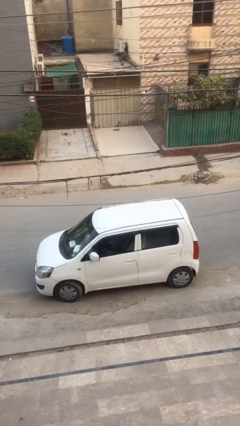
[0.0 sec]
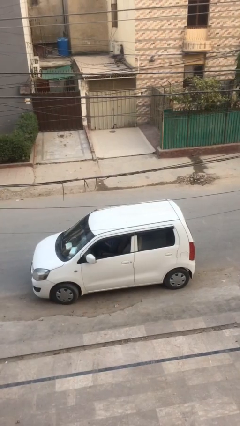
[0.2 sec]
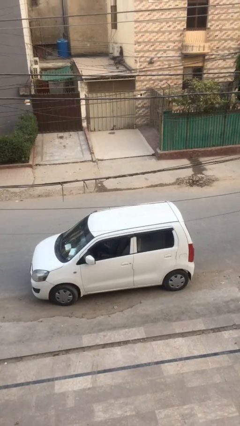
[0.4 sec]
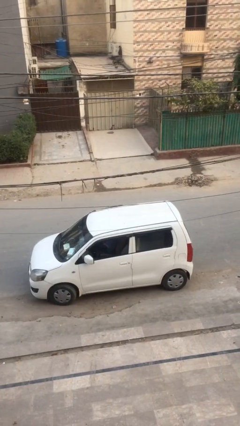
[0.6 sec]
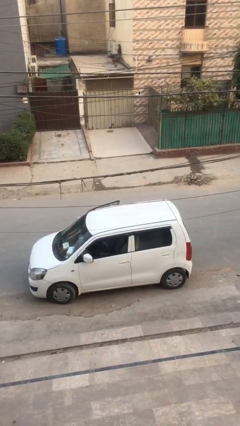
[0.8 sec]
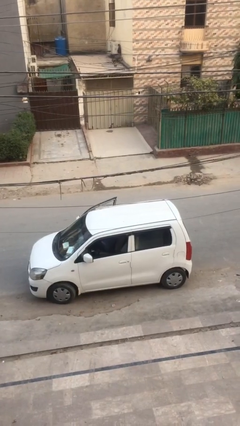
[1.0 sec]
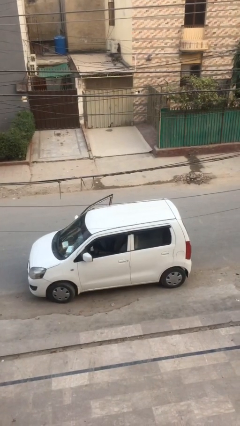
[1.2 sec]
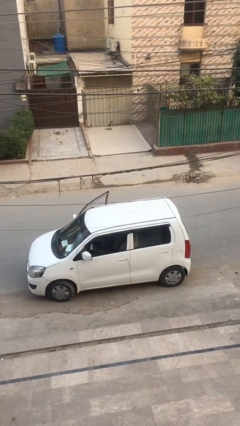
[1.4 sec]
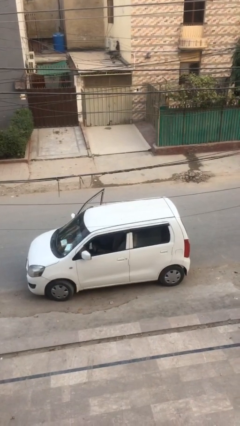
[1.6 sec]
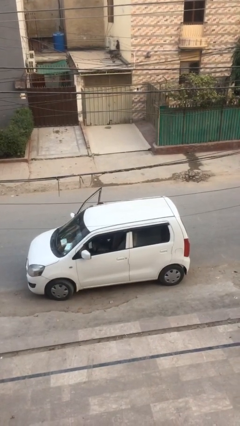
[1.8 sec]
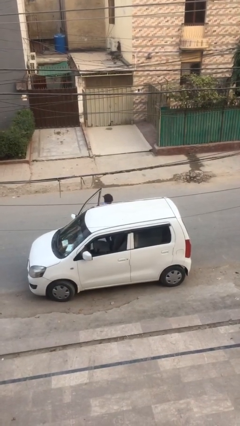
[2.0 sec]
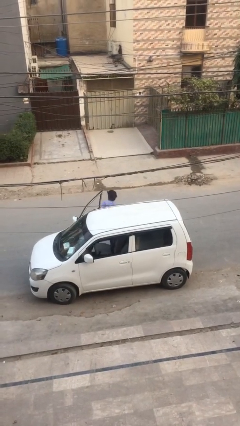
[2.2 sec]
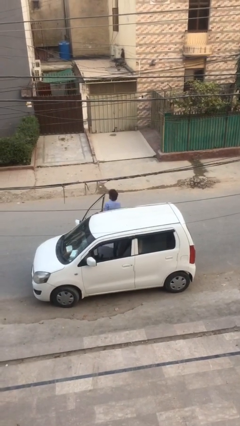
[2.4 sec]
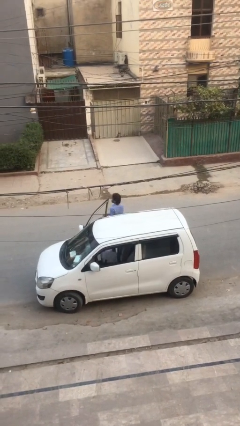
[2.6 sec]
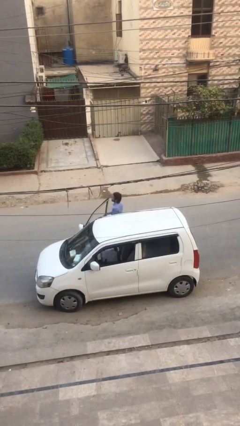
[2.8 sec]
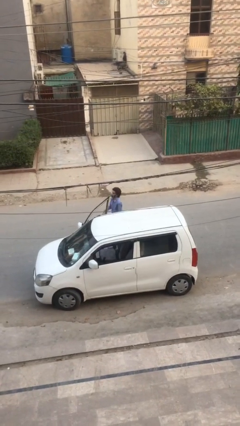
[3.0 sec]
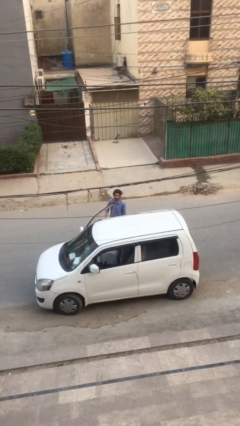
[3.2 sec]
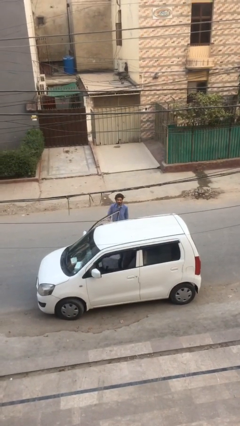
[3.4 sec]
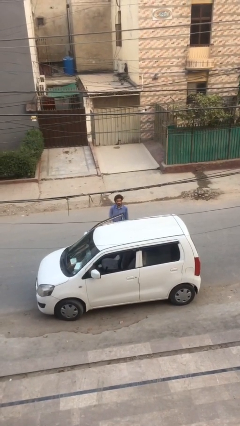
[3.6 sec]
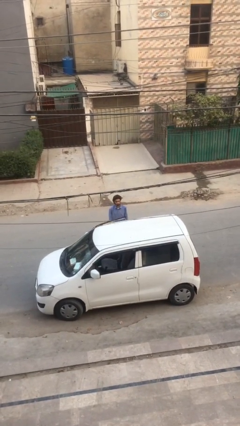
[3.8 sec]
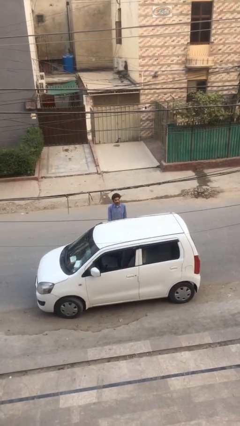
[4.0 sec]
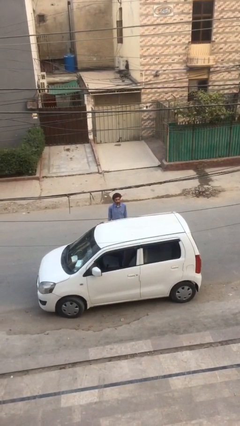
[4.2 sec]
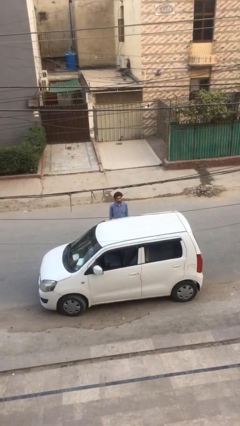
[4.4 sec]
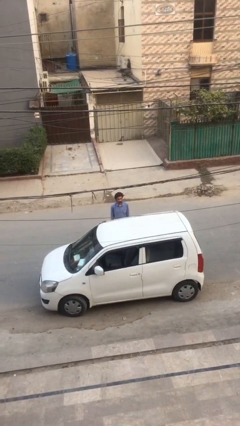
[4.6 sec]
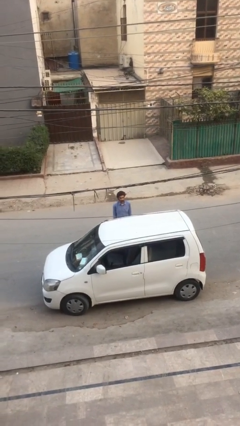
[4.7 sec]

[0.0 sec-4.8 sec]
person exits car

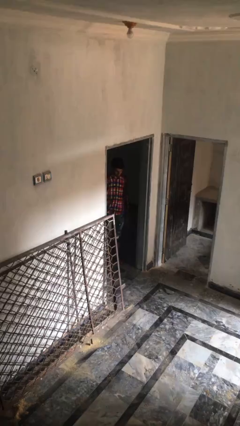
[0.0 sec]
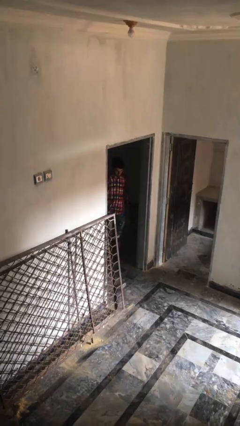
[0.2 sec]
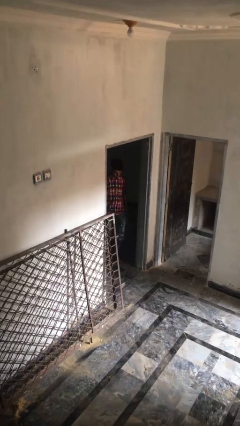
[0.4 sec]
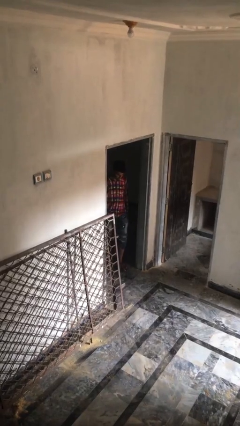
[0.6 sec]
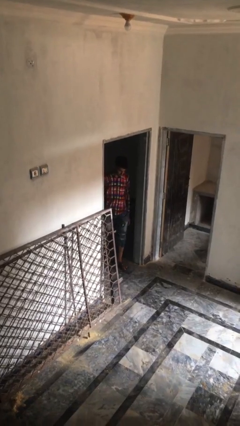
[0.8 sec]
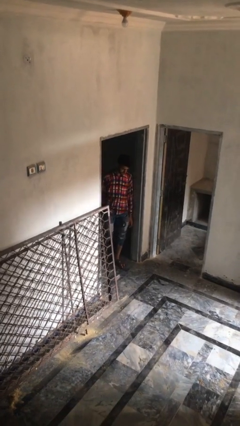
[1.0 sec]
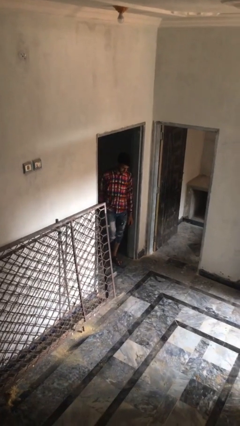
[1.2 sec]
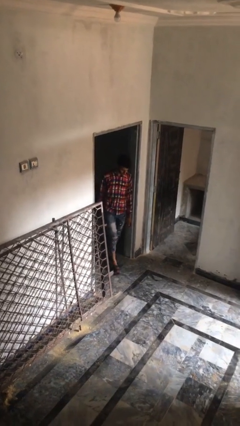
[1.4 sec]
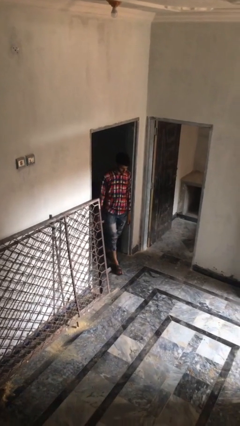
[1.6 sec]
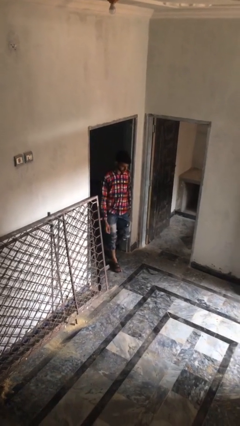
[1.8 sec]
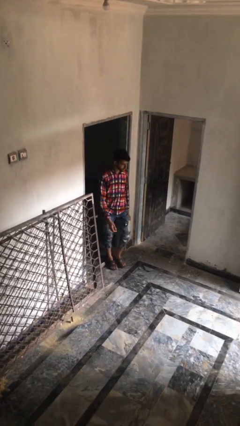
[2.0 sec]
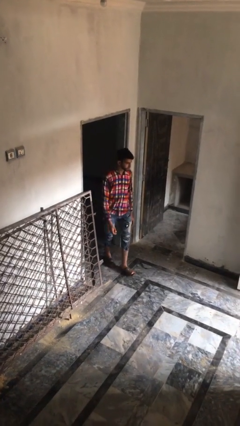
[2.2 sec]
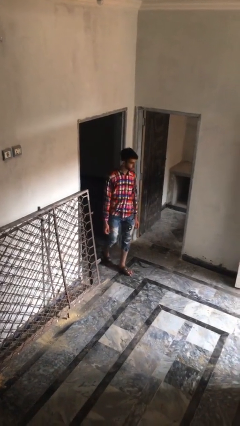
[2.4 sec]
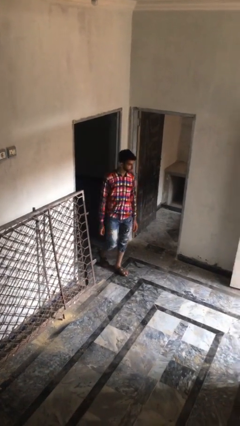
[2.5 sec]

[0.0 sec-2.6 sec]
person enters scene through structure

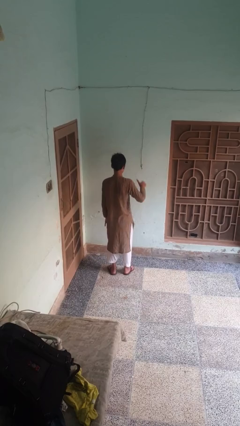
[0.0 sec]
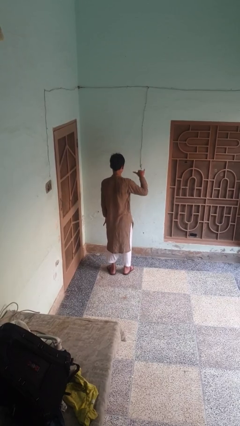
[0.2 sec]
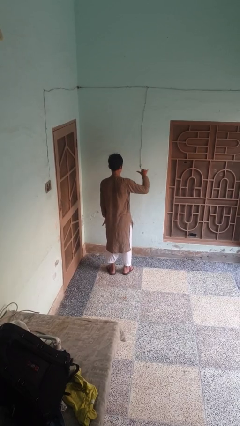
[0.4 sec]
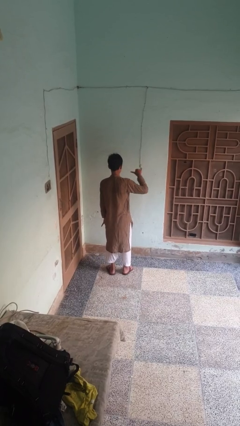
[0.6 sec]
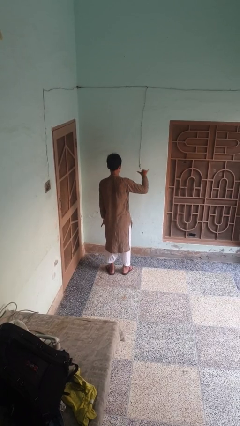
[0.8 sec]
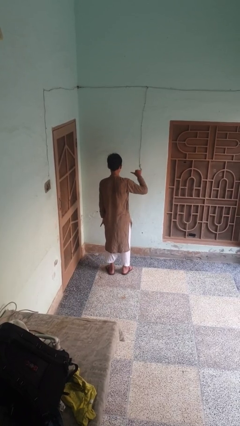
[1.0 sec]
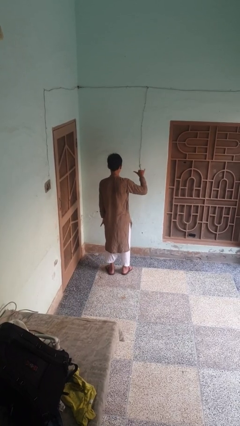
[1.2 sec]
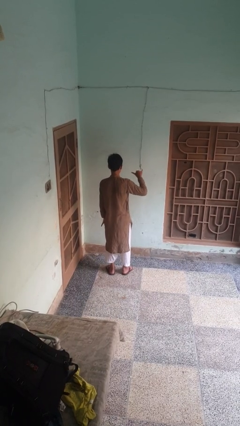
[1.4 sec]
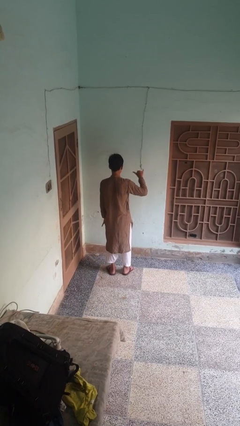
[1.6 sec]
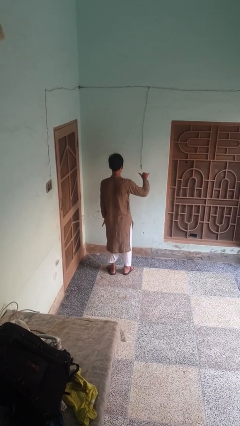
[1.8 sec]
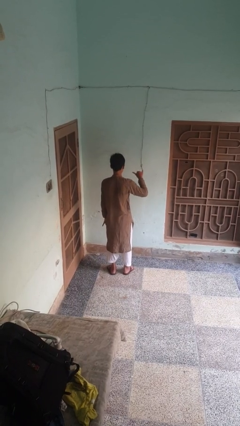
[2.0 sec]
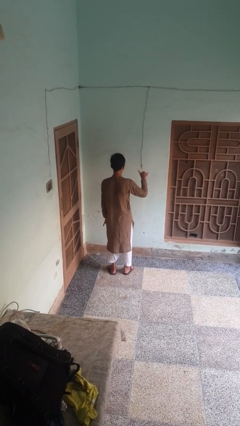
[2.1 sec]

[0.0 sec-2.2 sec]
person gestures hang loose

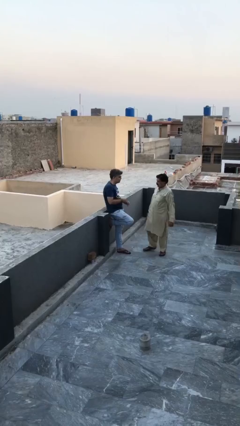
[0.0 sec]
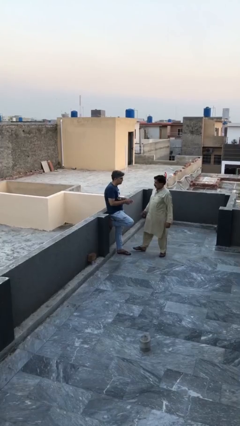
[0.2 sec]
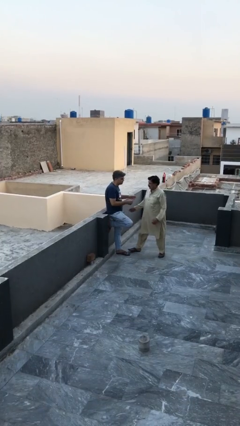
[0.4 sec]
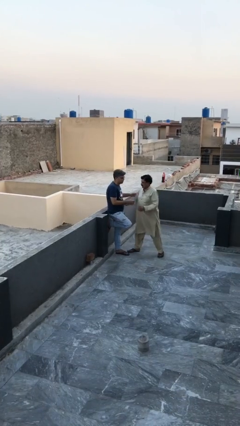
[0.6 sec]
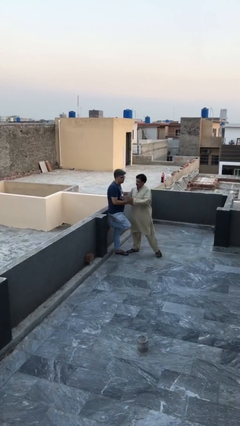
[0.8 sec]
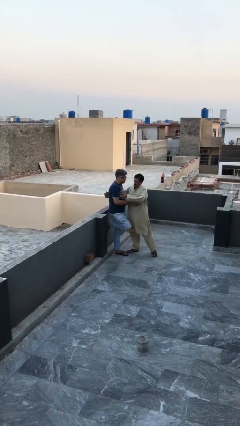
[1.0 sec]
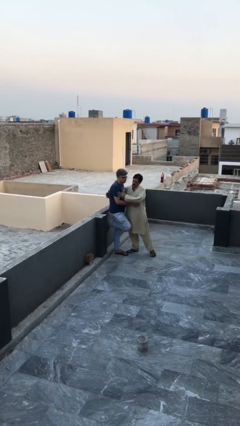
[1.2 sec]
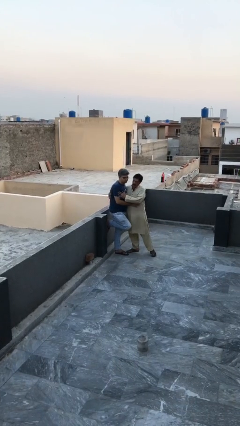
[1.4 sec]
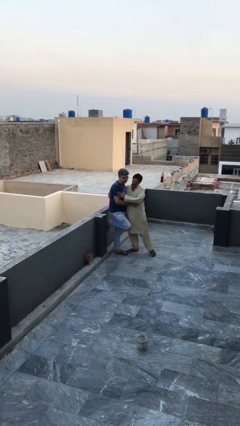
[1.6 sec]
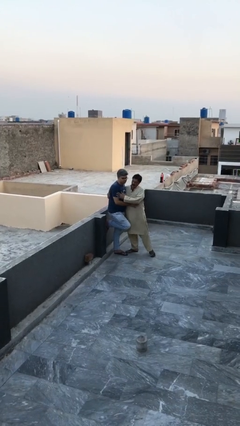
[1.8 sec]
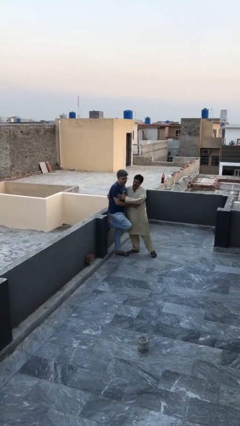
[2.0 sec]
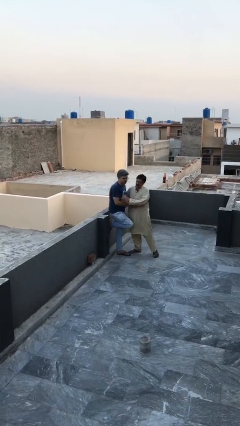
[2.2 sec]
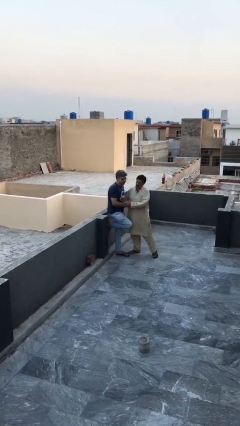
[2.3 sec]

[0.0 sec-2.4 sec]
person embraces person

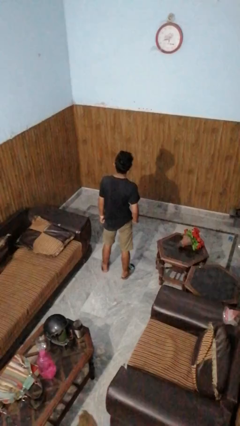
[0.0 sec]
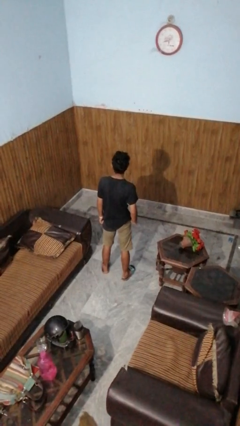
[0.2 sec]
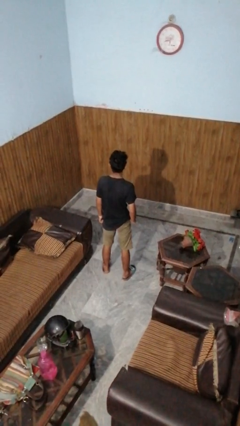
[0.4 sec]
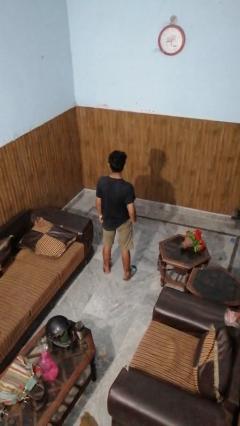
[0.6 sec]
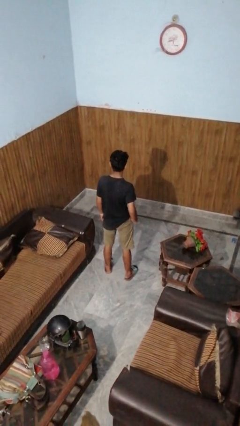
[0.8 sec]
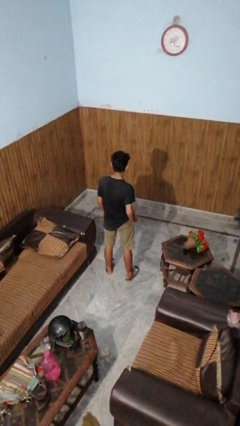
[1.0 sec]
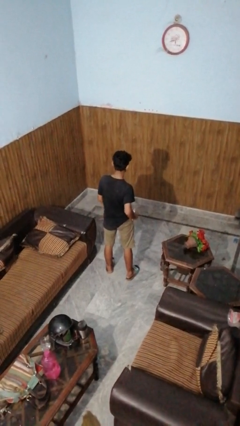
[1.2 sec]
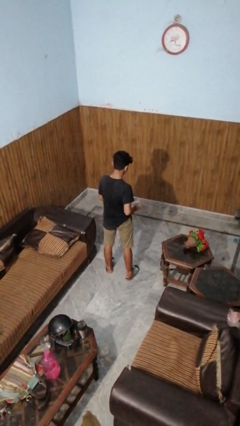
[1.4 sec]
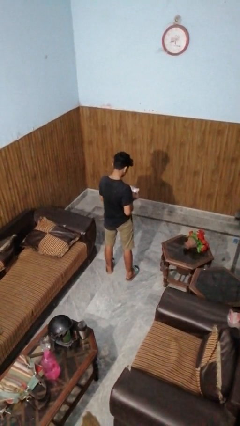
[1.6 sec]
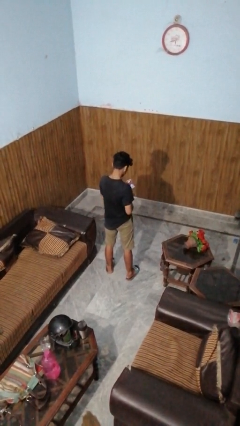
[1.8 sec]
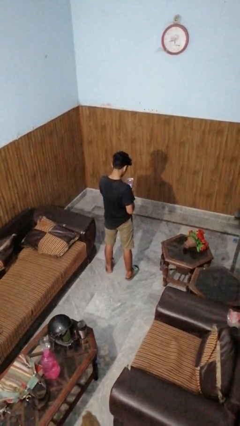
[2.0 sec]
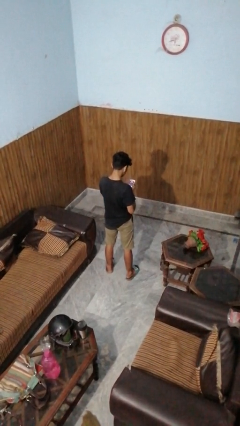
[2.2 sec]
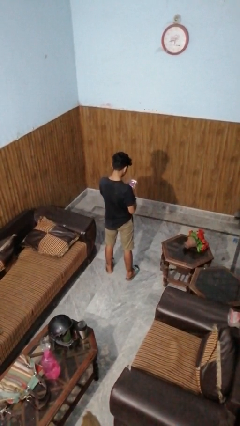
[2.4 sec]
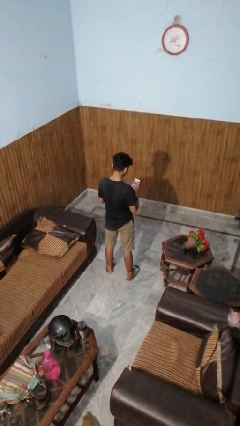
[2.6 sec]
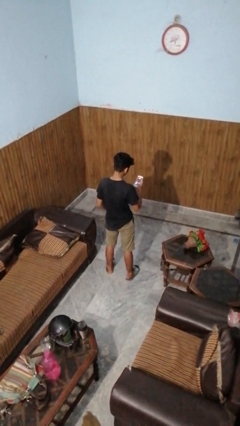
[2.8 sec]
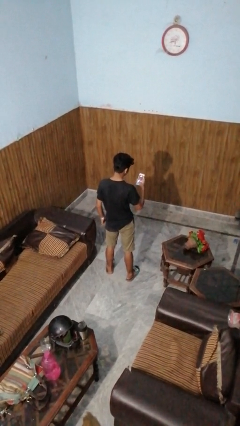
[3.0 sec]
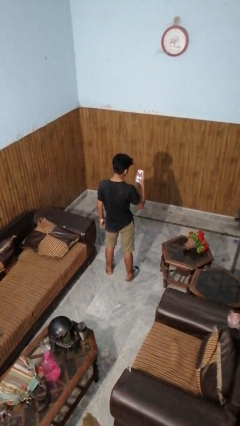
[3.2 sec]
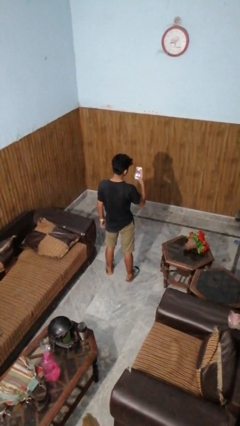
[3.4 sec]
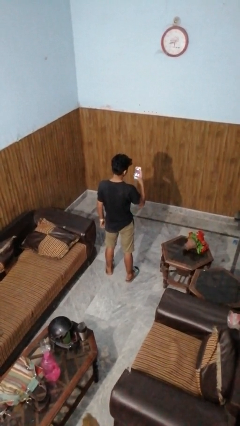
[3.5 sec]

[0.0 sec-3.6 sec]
person takes phone from pocket

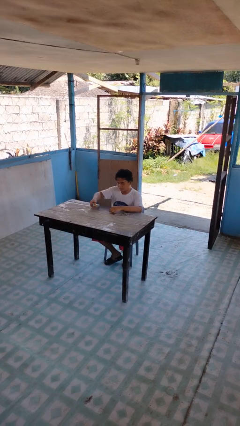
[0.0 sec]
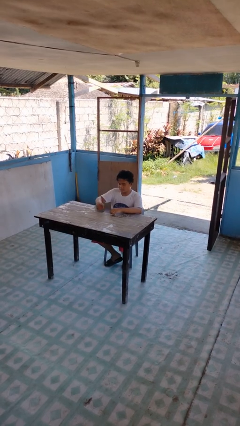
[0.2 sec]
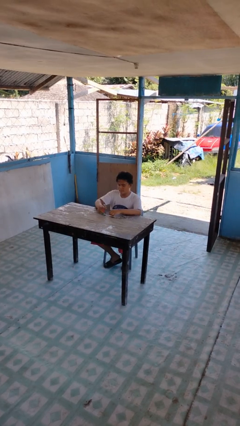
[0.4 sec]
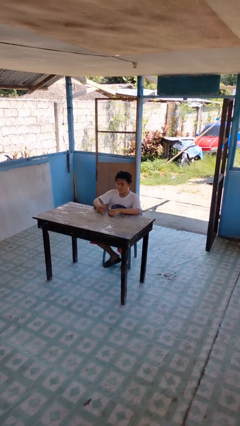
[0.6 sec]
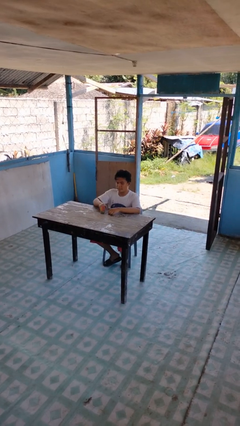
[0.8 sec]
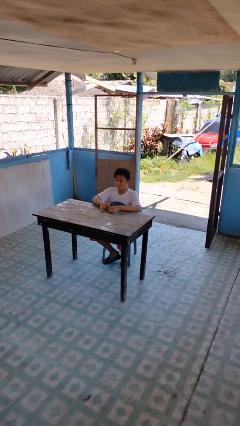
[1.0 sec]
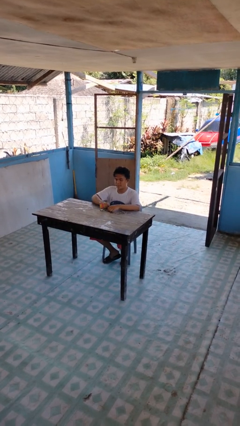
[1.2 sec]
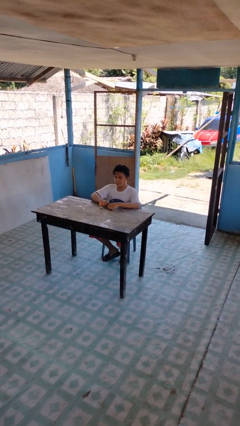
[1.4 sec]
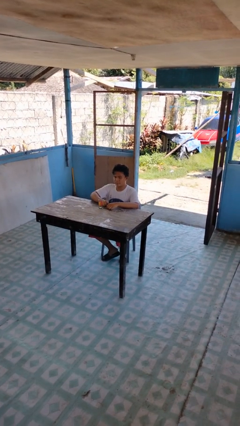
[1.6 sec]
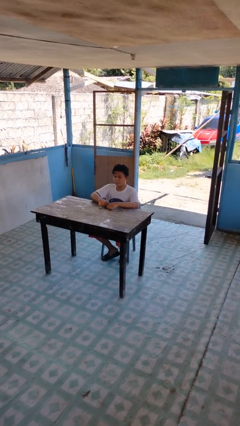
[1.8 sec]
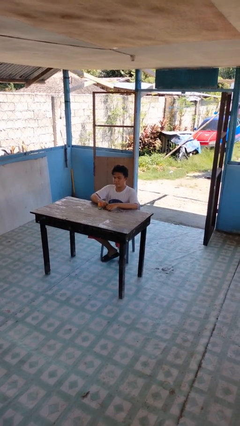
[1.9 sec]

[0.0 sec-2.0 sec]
person sets upright glass
